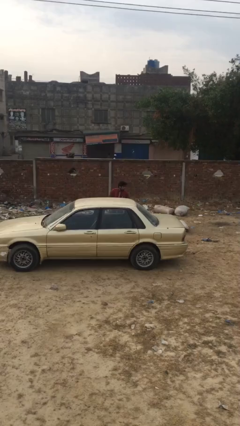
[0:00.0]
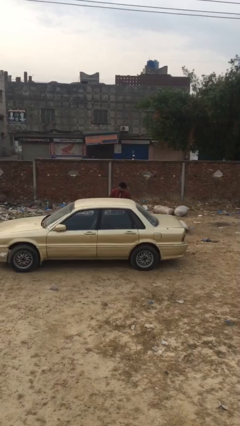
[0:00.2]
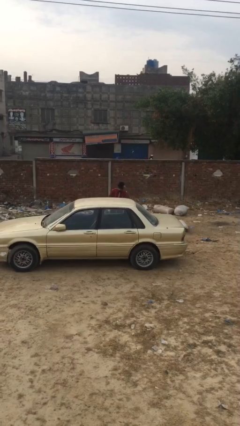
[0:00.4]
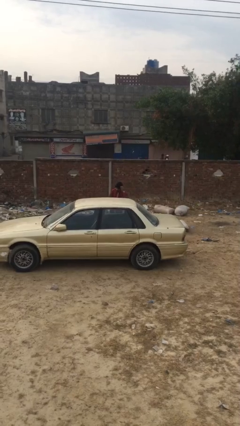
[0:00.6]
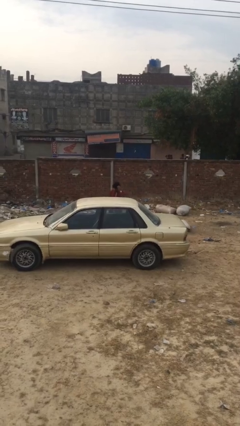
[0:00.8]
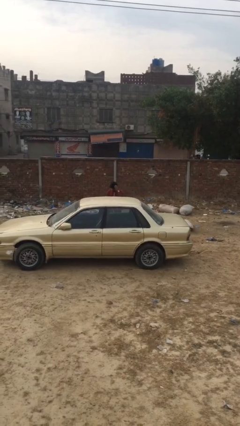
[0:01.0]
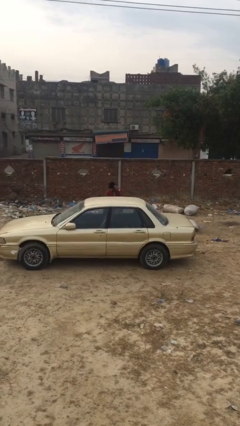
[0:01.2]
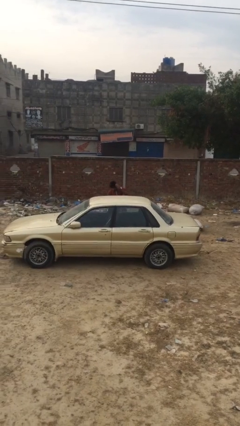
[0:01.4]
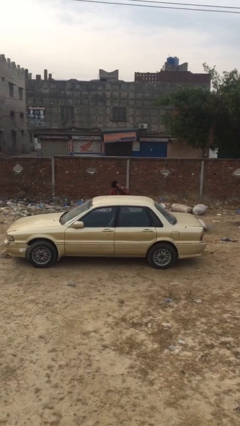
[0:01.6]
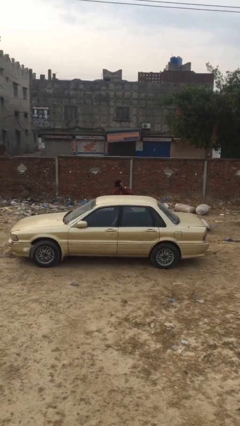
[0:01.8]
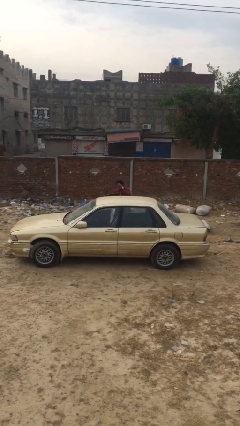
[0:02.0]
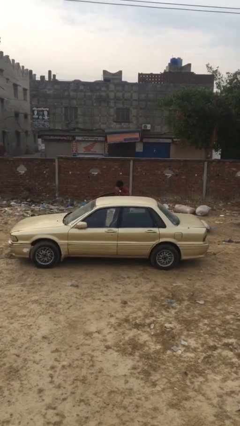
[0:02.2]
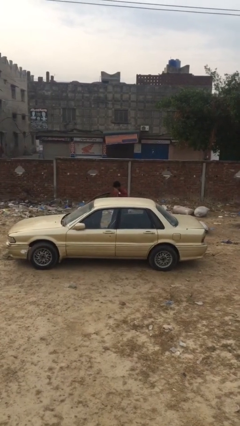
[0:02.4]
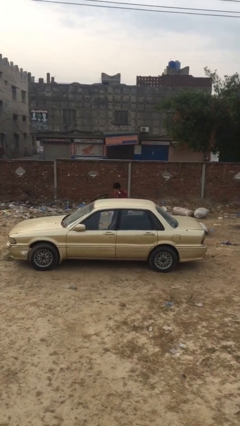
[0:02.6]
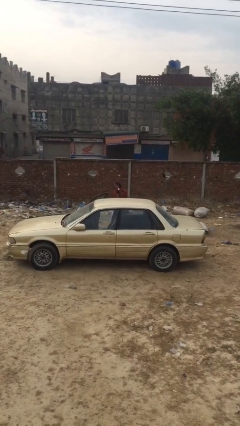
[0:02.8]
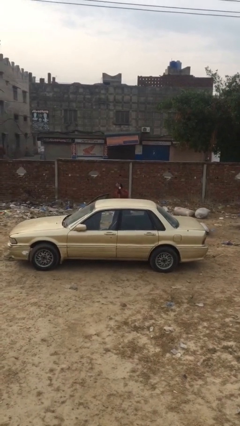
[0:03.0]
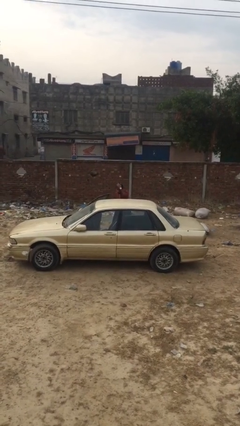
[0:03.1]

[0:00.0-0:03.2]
person opens car door

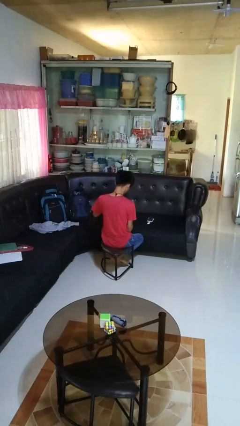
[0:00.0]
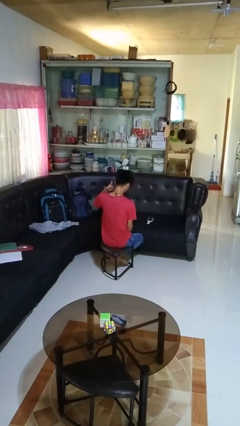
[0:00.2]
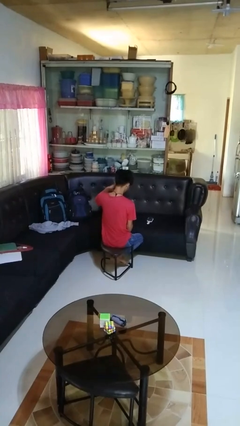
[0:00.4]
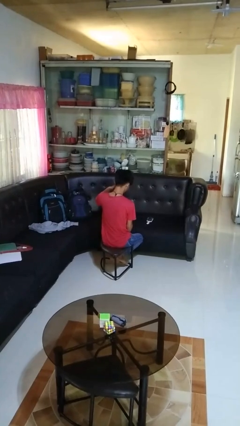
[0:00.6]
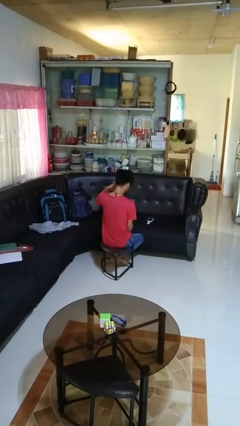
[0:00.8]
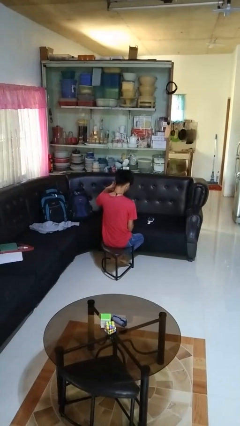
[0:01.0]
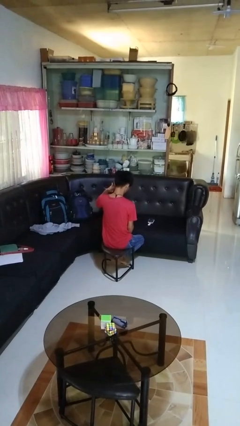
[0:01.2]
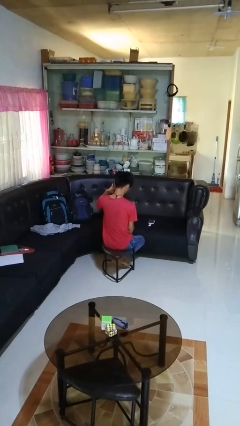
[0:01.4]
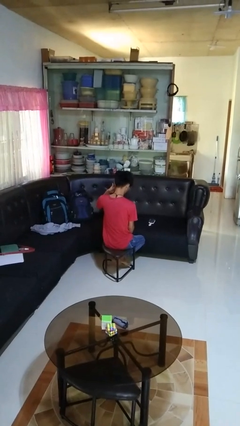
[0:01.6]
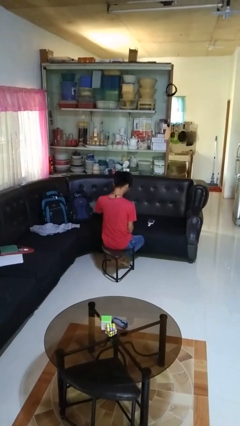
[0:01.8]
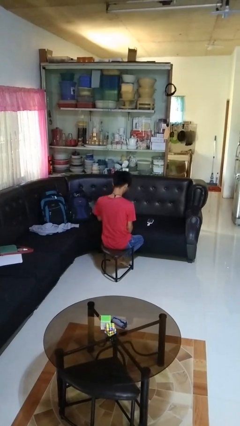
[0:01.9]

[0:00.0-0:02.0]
person gestures call me

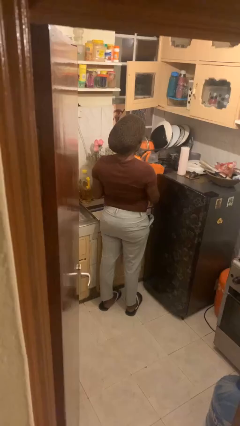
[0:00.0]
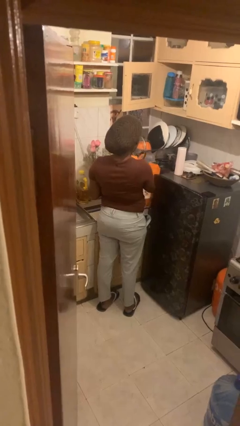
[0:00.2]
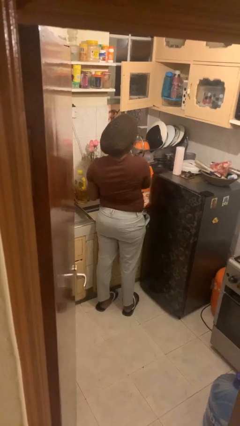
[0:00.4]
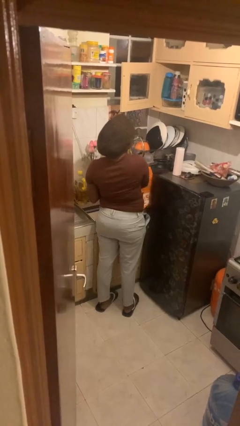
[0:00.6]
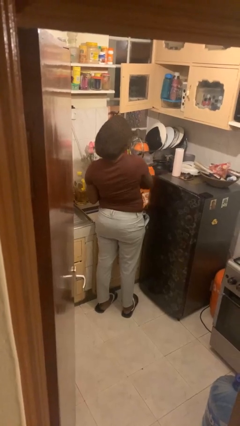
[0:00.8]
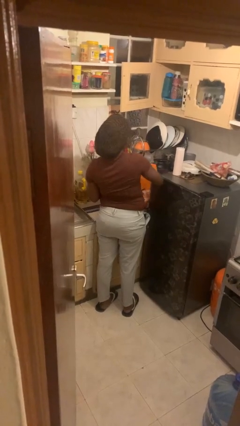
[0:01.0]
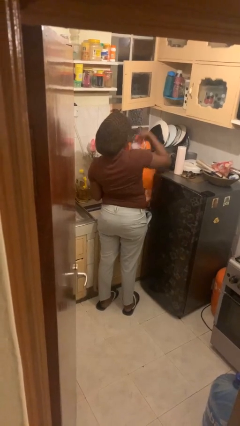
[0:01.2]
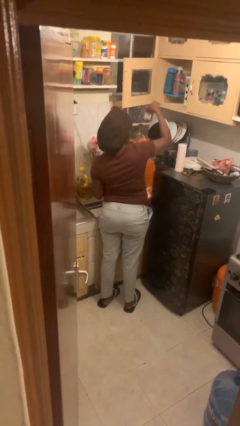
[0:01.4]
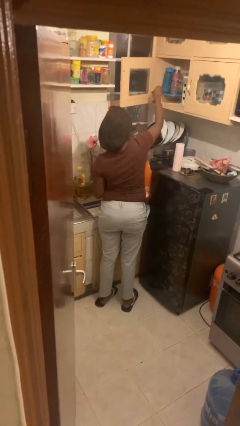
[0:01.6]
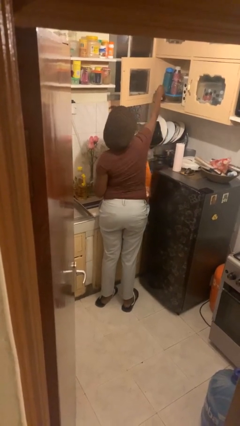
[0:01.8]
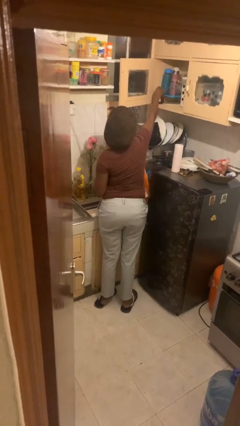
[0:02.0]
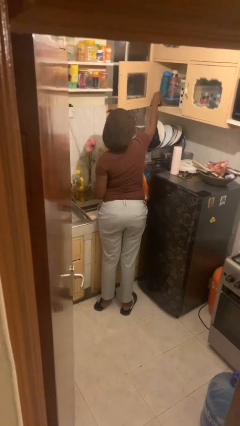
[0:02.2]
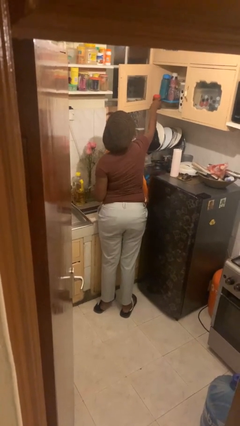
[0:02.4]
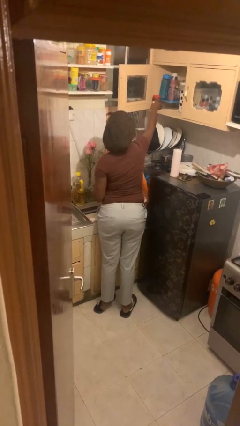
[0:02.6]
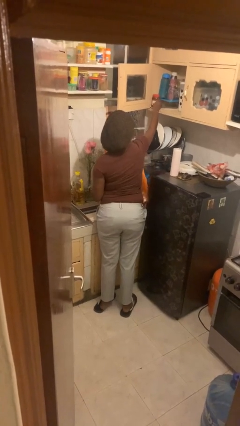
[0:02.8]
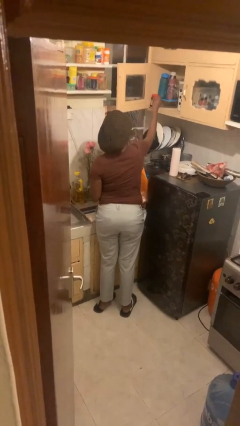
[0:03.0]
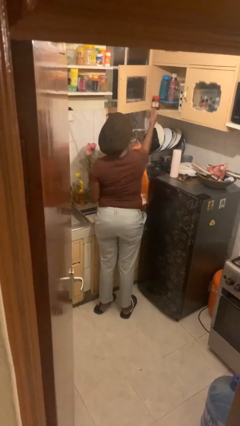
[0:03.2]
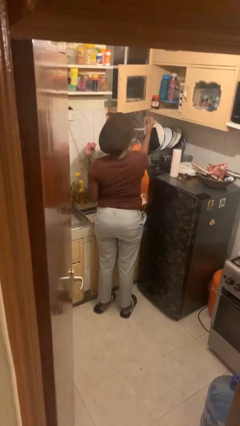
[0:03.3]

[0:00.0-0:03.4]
person loads groceries into cabinet

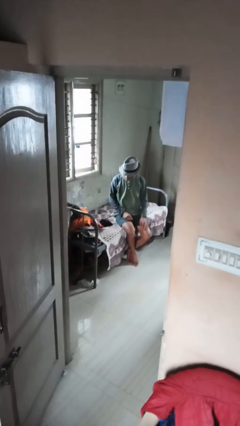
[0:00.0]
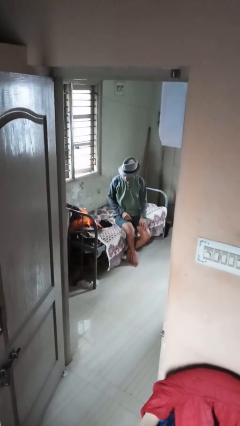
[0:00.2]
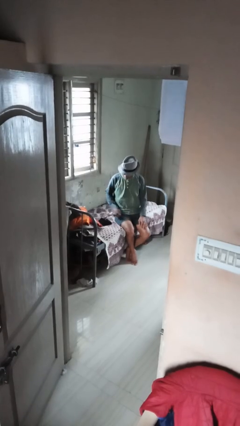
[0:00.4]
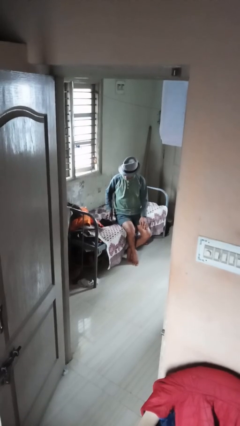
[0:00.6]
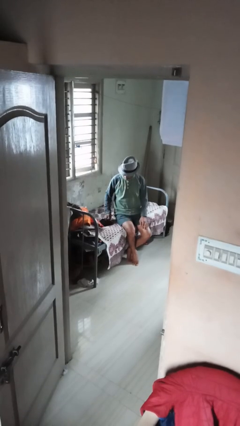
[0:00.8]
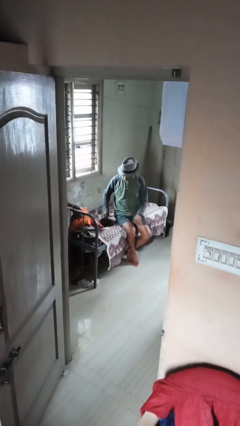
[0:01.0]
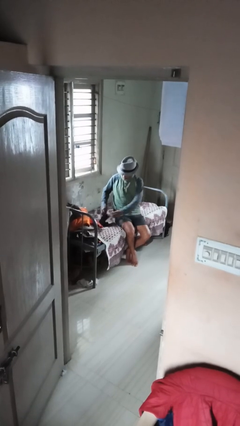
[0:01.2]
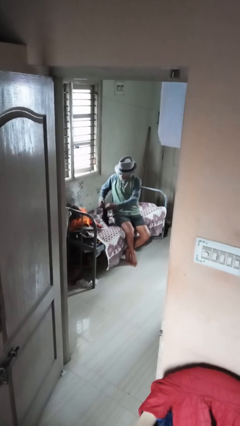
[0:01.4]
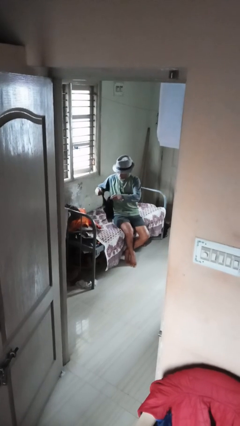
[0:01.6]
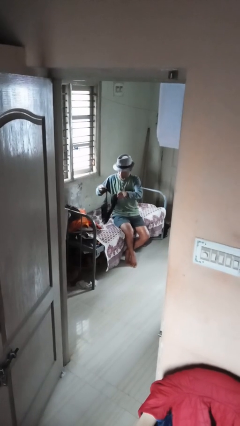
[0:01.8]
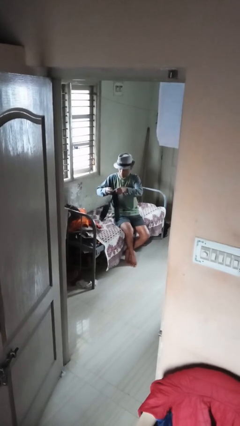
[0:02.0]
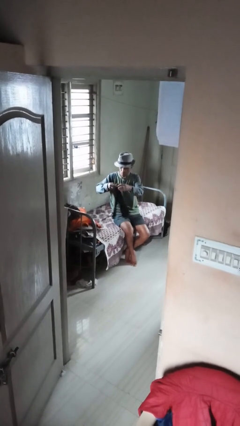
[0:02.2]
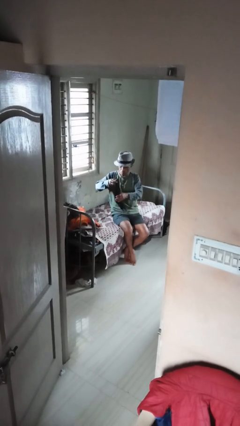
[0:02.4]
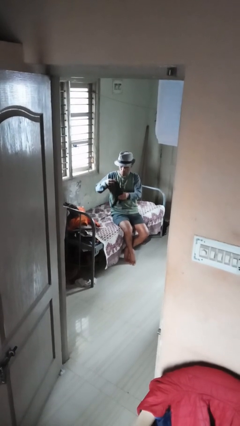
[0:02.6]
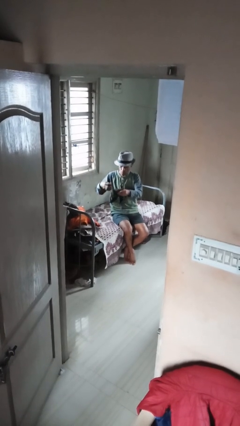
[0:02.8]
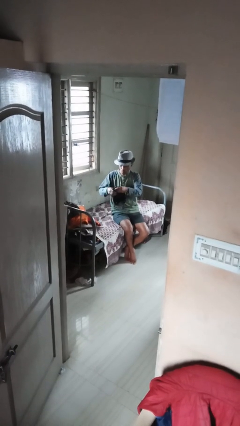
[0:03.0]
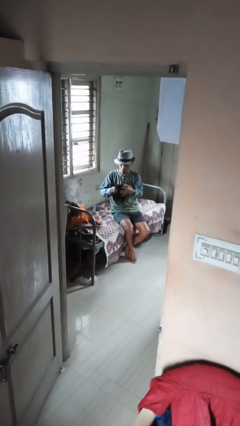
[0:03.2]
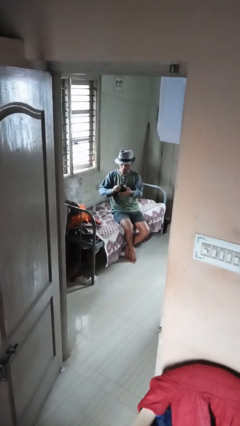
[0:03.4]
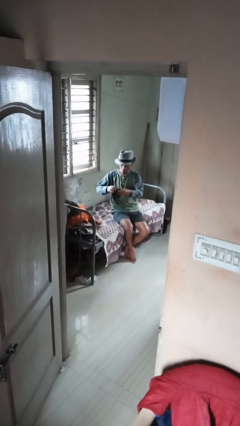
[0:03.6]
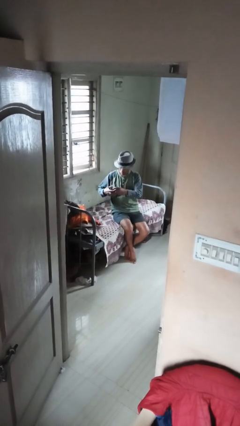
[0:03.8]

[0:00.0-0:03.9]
person folds socks

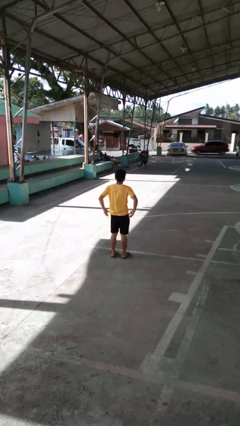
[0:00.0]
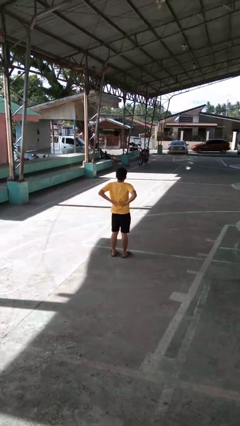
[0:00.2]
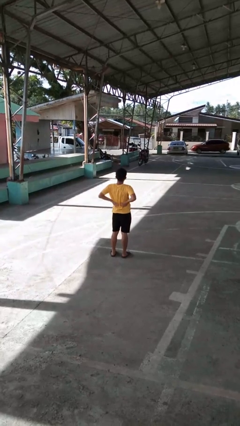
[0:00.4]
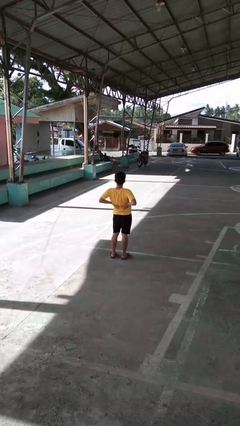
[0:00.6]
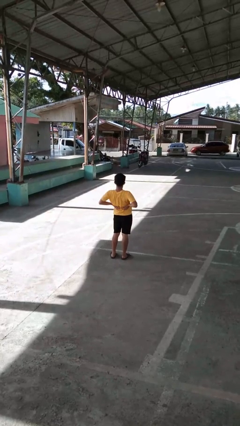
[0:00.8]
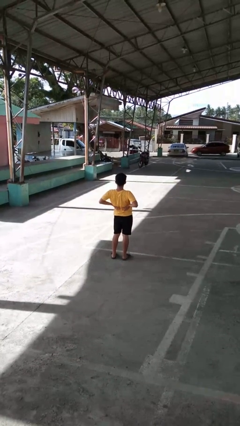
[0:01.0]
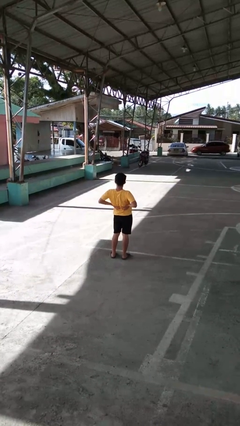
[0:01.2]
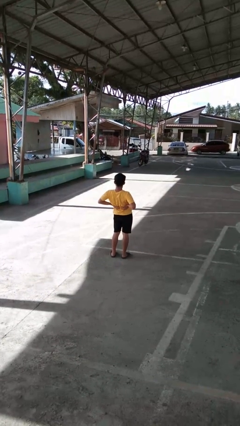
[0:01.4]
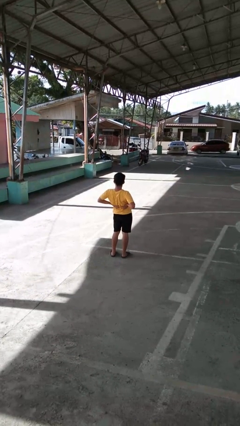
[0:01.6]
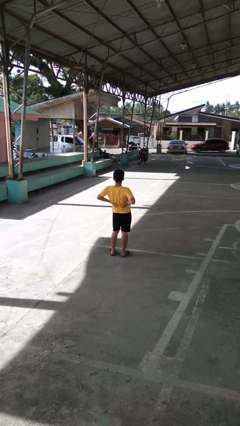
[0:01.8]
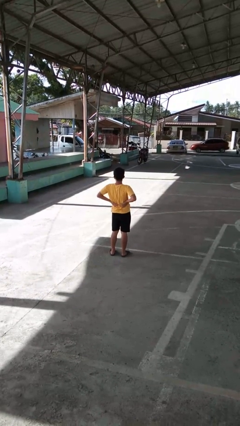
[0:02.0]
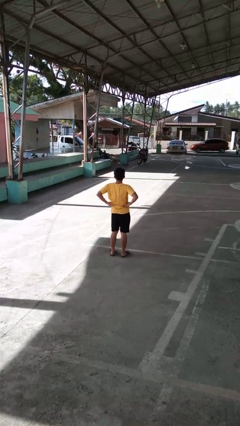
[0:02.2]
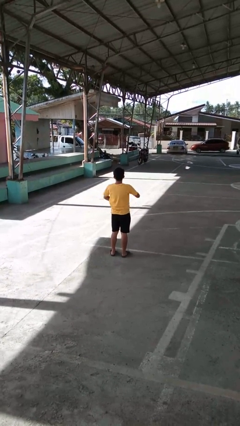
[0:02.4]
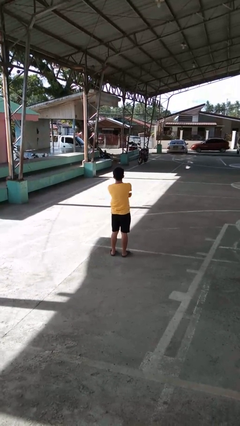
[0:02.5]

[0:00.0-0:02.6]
person stretches back

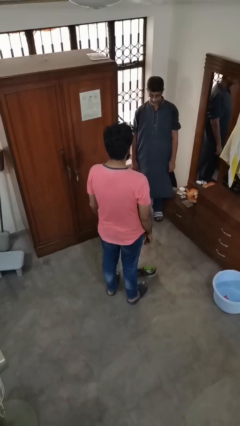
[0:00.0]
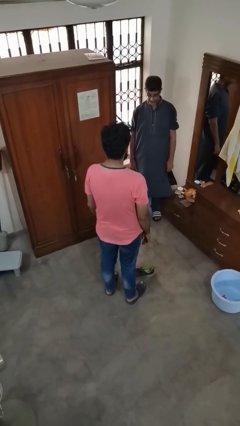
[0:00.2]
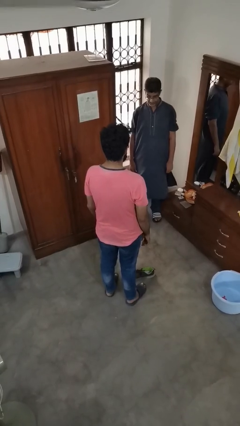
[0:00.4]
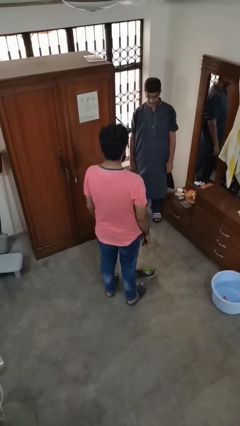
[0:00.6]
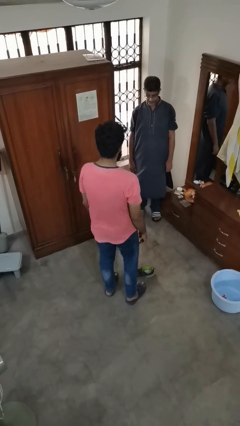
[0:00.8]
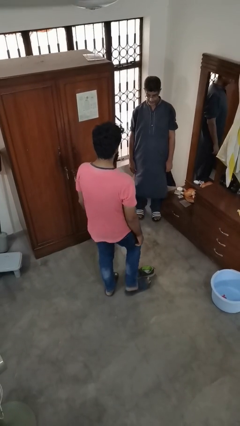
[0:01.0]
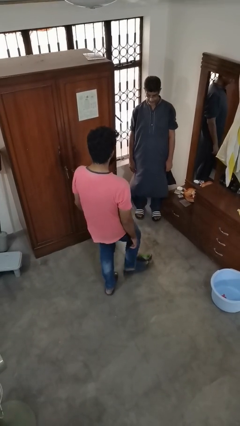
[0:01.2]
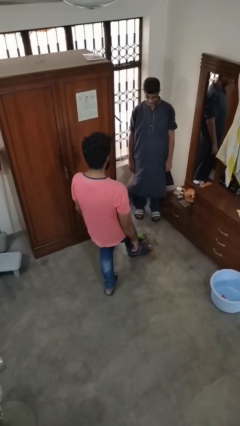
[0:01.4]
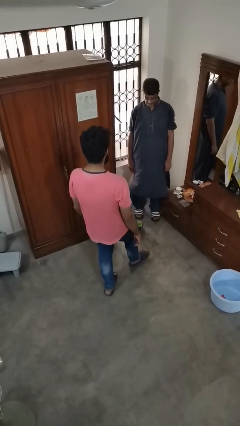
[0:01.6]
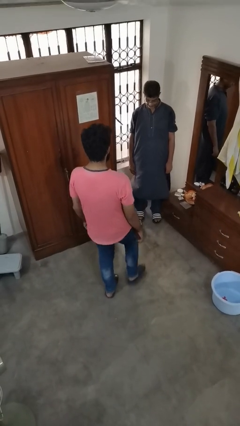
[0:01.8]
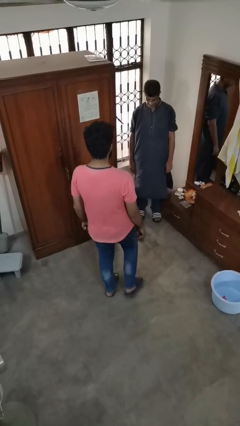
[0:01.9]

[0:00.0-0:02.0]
person kicks object to person
